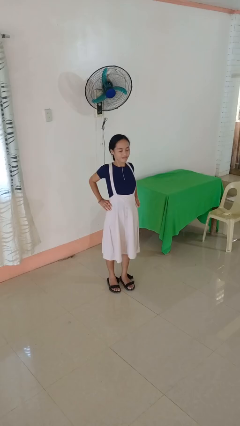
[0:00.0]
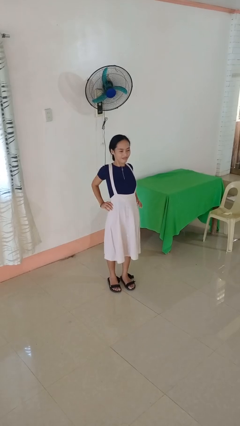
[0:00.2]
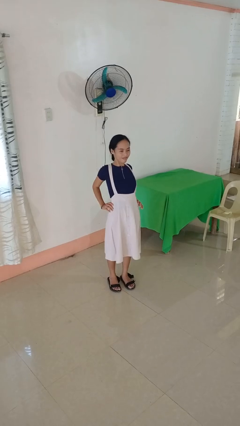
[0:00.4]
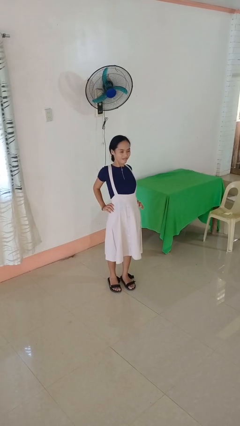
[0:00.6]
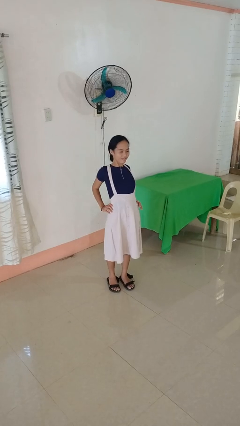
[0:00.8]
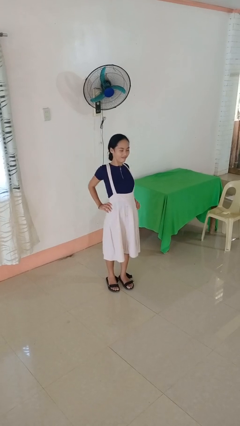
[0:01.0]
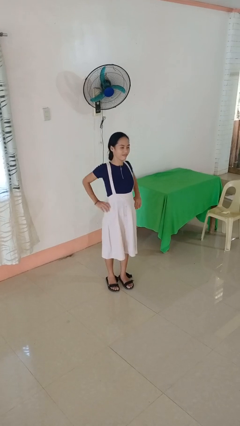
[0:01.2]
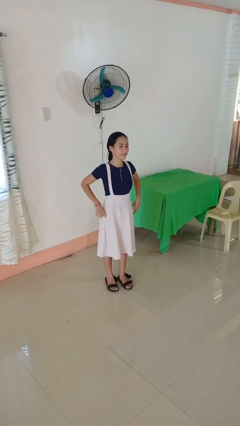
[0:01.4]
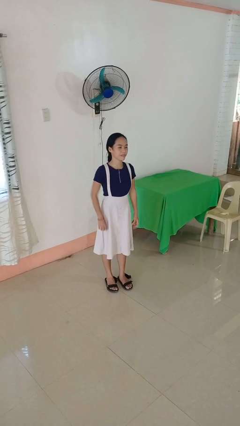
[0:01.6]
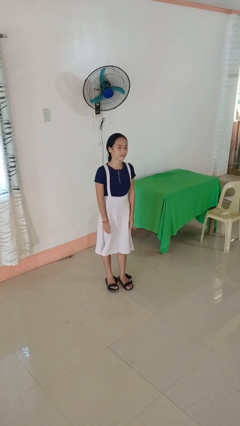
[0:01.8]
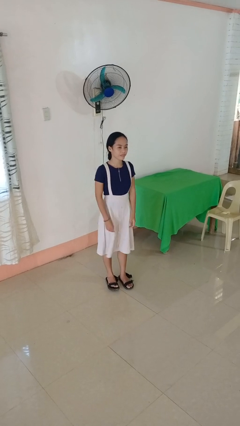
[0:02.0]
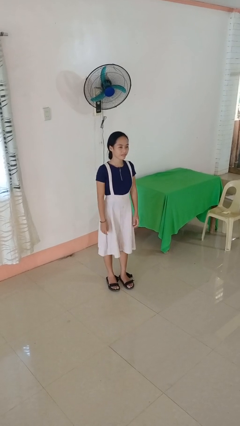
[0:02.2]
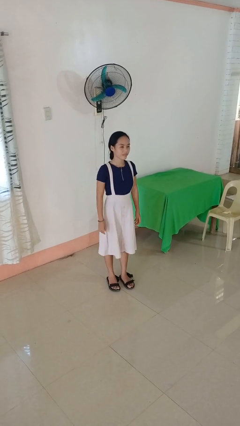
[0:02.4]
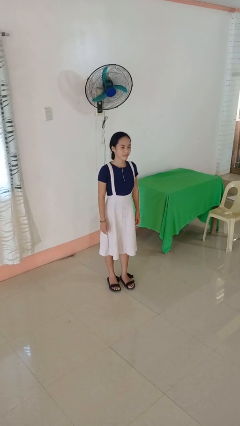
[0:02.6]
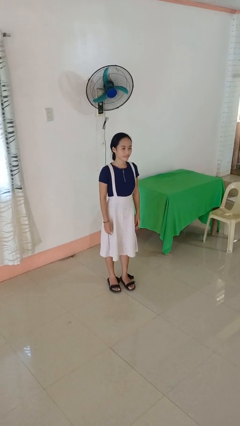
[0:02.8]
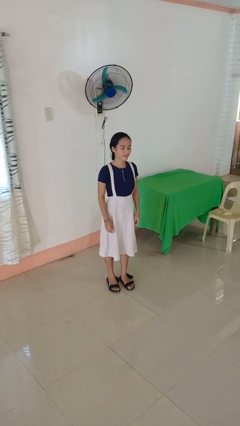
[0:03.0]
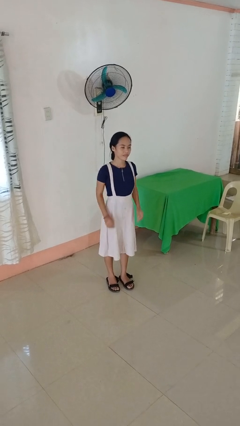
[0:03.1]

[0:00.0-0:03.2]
person stretches back

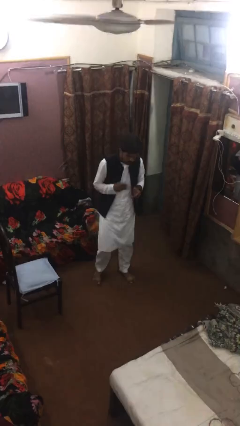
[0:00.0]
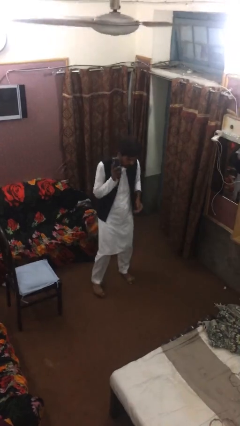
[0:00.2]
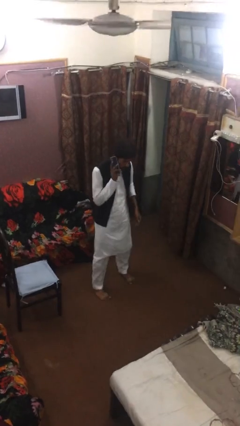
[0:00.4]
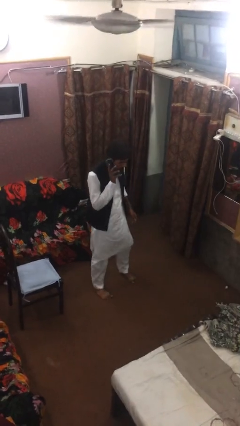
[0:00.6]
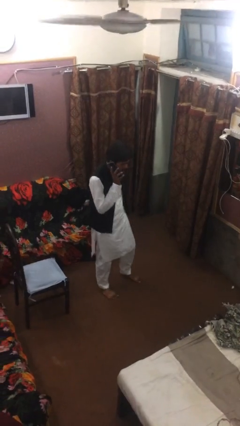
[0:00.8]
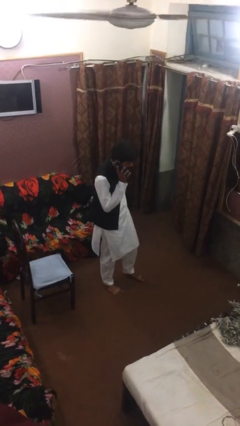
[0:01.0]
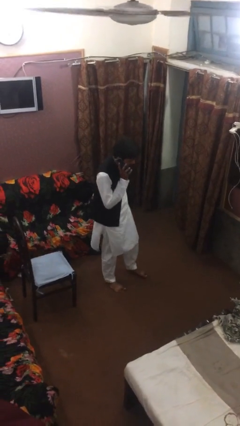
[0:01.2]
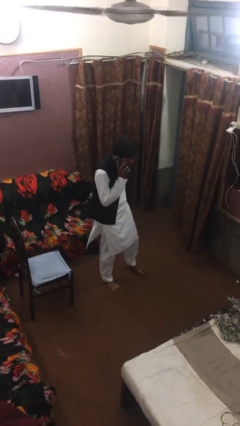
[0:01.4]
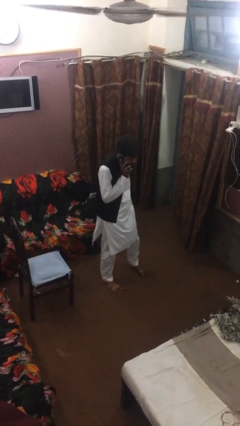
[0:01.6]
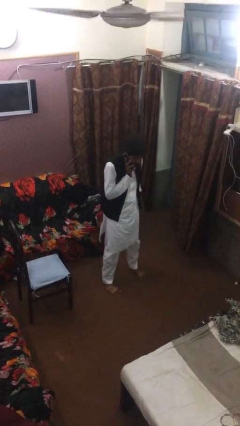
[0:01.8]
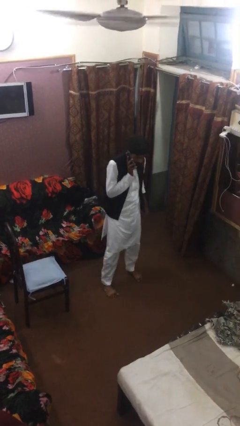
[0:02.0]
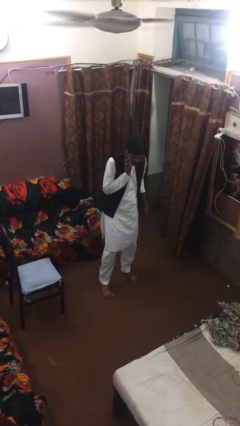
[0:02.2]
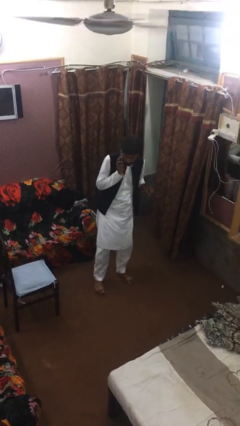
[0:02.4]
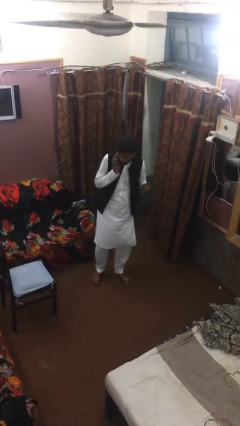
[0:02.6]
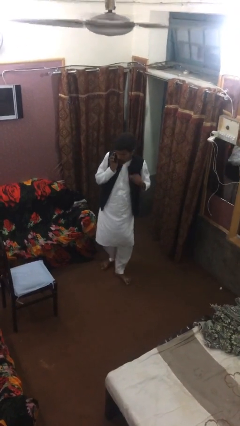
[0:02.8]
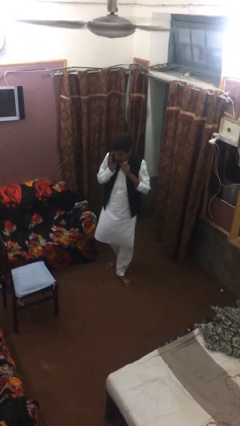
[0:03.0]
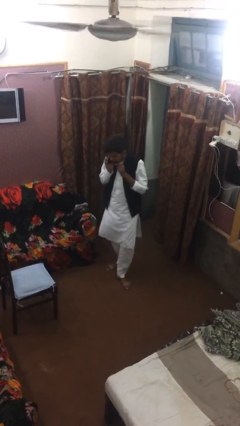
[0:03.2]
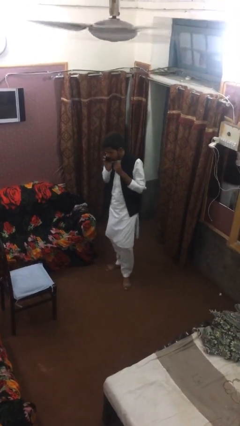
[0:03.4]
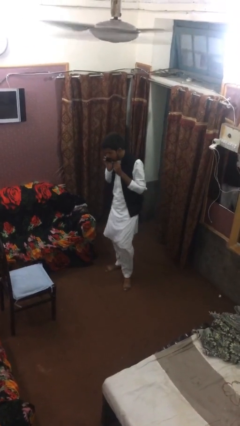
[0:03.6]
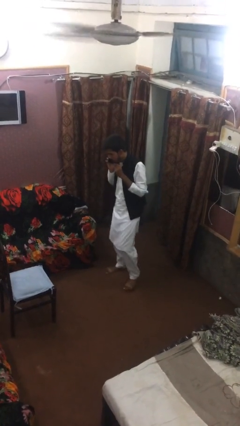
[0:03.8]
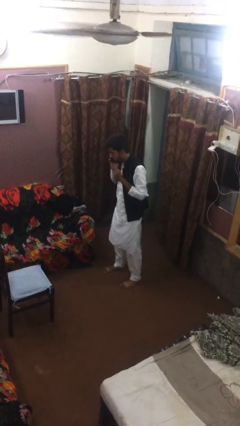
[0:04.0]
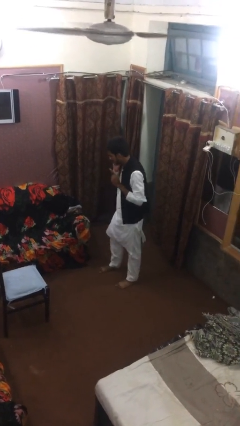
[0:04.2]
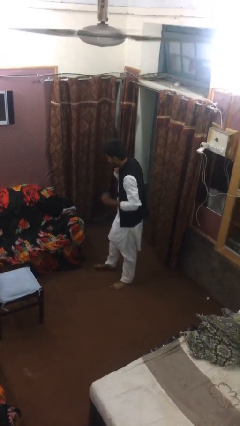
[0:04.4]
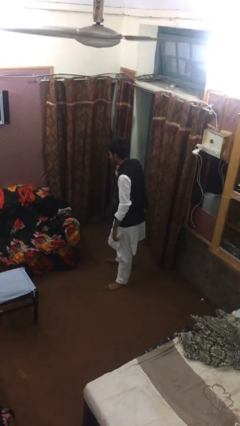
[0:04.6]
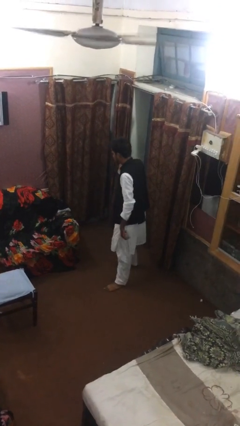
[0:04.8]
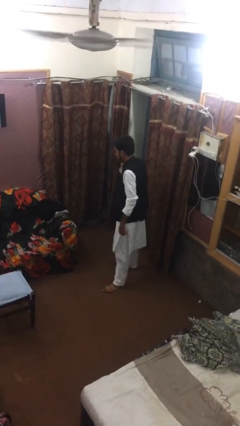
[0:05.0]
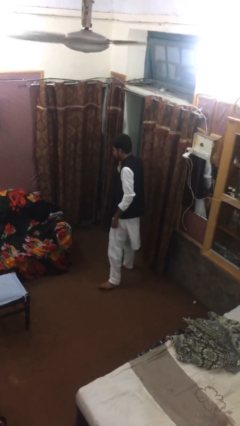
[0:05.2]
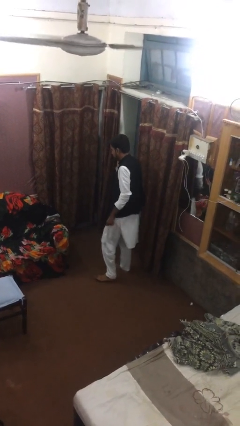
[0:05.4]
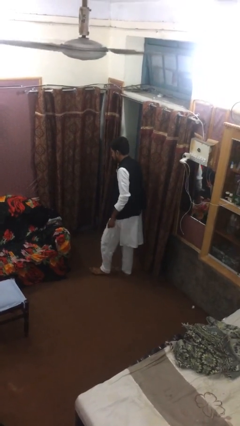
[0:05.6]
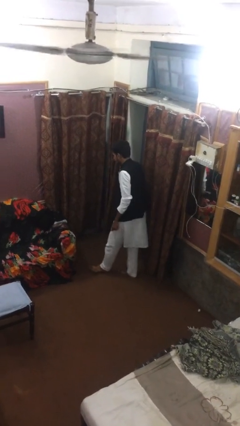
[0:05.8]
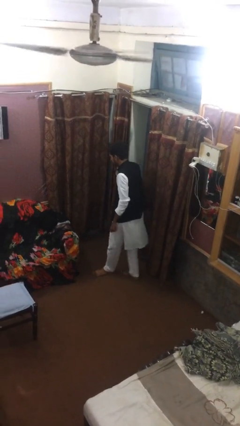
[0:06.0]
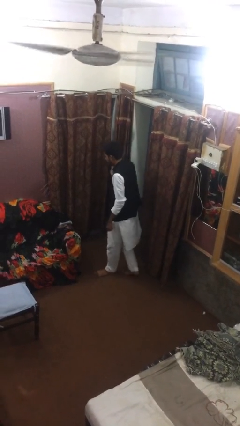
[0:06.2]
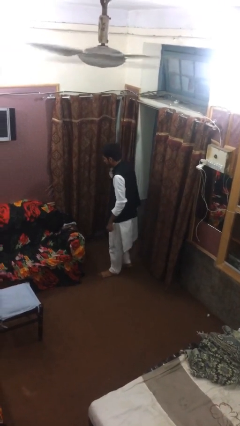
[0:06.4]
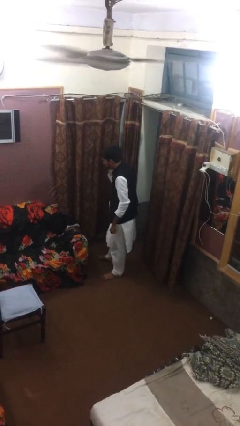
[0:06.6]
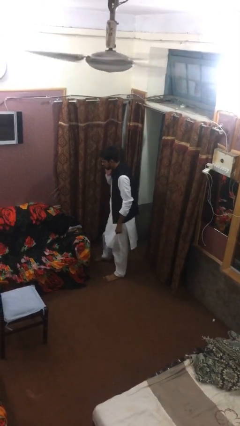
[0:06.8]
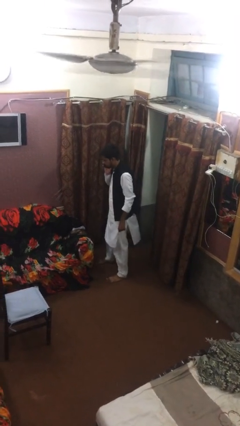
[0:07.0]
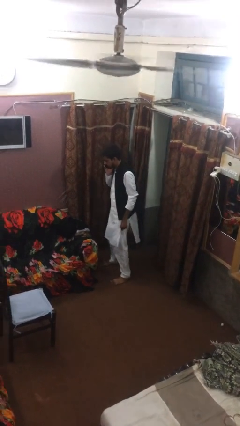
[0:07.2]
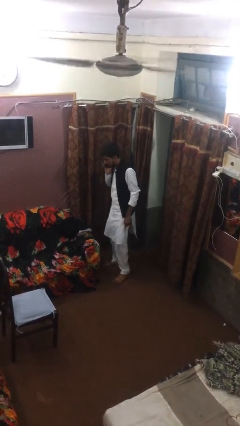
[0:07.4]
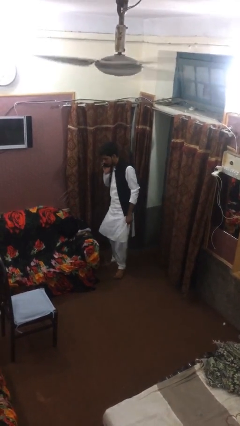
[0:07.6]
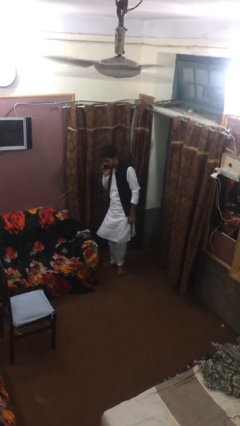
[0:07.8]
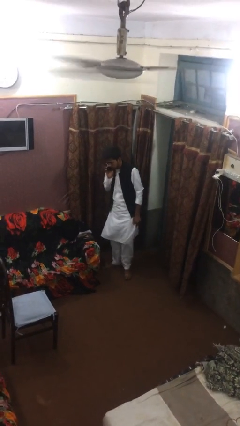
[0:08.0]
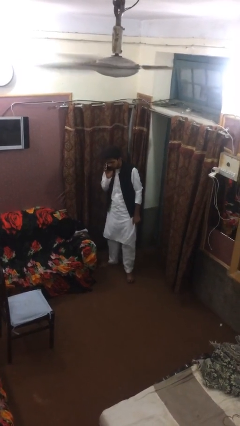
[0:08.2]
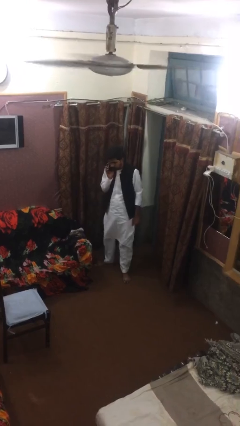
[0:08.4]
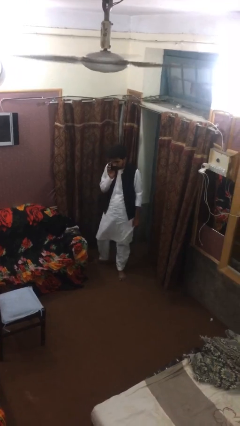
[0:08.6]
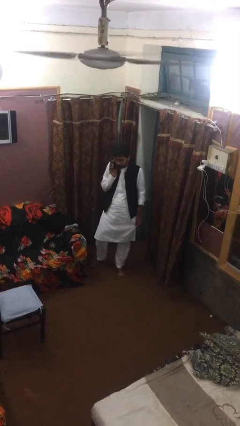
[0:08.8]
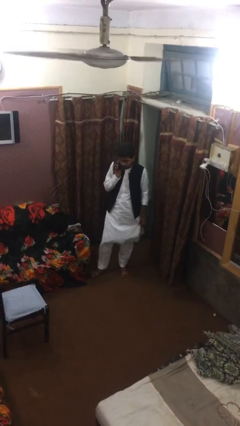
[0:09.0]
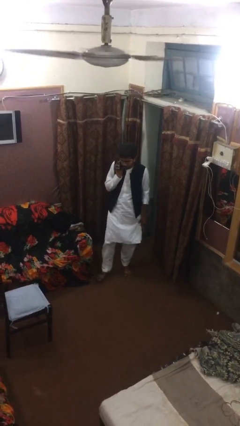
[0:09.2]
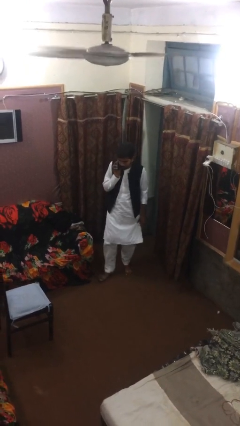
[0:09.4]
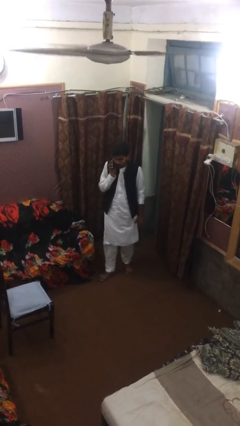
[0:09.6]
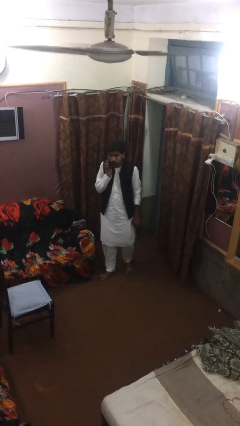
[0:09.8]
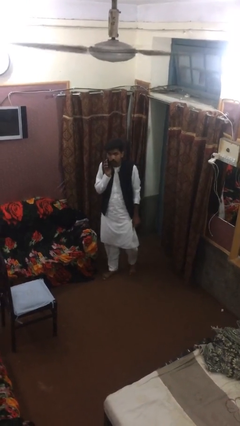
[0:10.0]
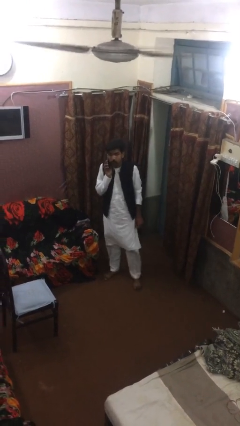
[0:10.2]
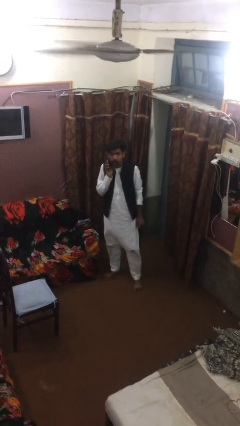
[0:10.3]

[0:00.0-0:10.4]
person talks on phone

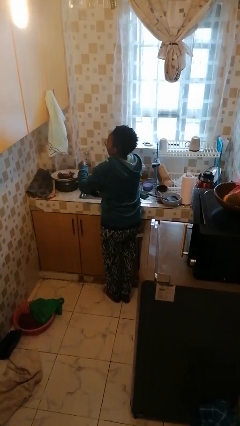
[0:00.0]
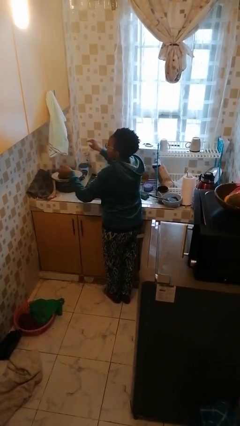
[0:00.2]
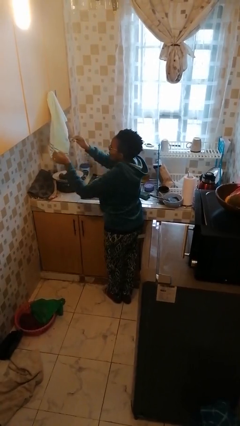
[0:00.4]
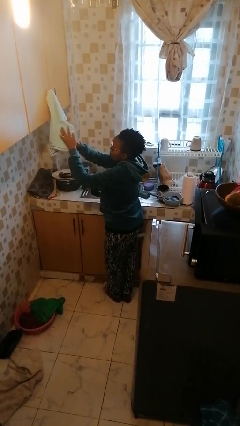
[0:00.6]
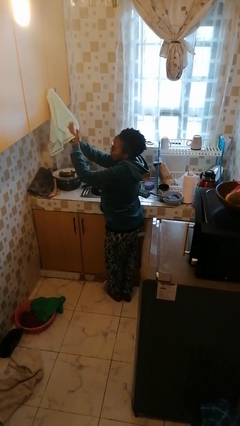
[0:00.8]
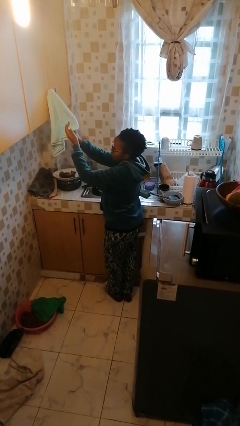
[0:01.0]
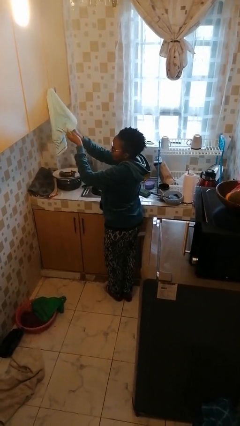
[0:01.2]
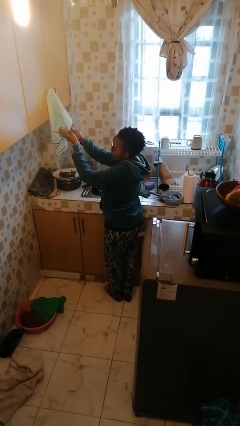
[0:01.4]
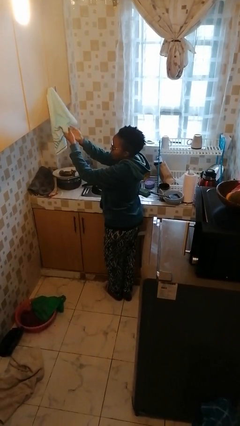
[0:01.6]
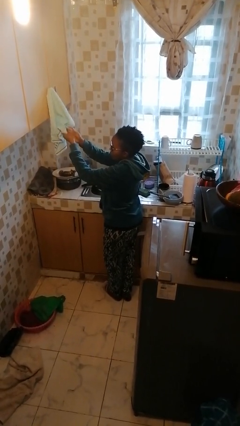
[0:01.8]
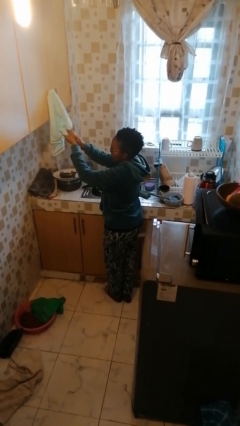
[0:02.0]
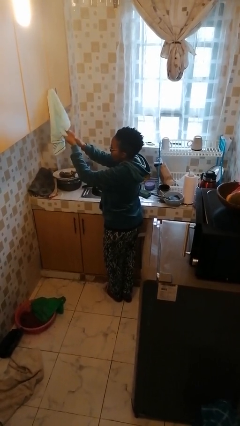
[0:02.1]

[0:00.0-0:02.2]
person dries hands with towel

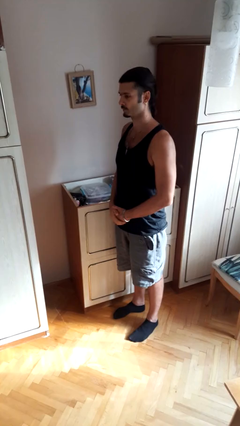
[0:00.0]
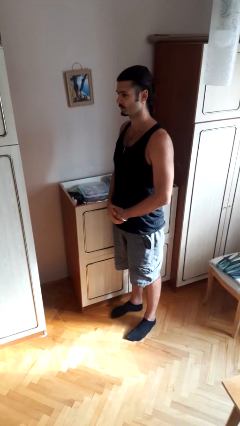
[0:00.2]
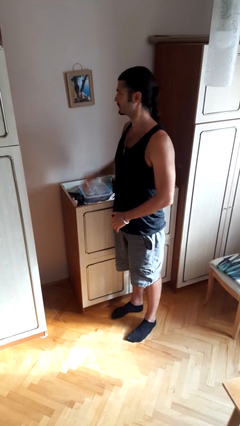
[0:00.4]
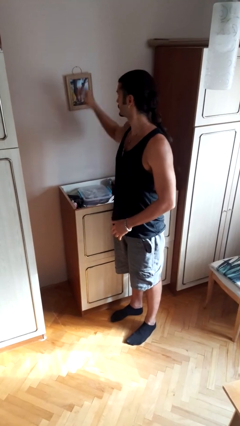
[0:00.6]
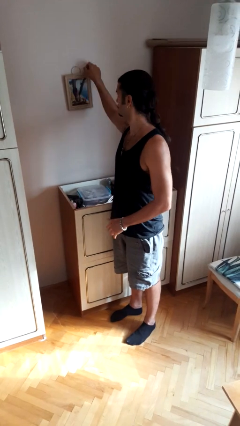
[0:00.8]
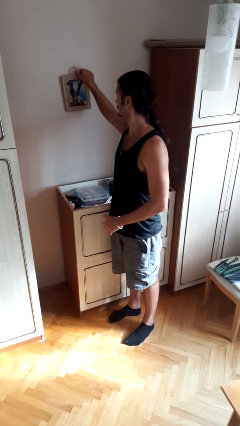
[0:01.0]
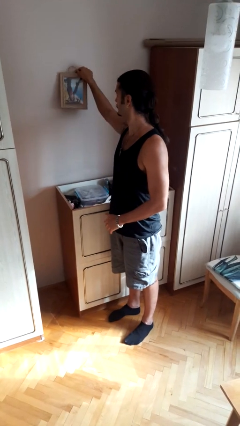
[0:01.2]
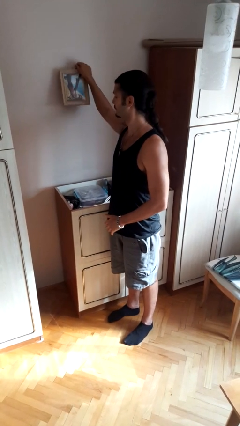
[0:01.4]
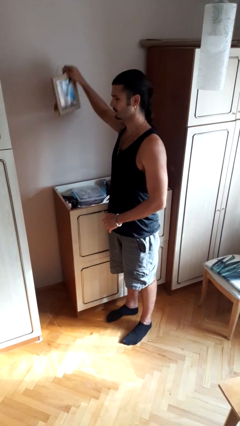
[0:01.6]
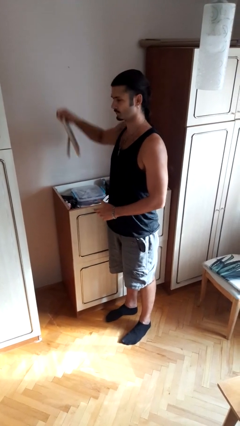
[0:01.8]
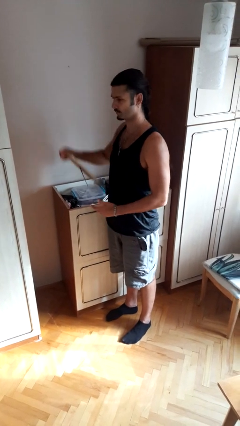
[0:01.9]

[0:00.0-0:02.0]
person takes down picture frame
